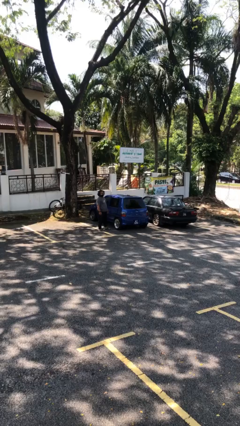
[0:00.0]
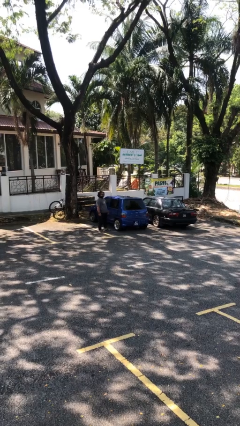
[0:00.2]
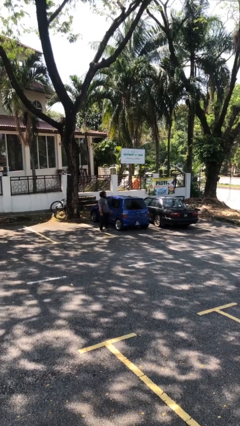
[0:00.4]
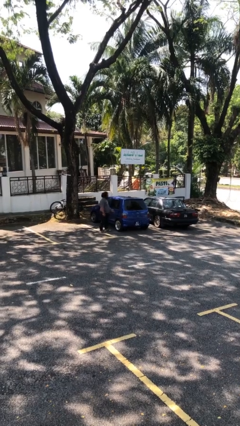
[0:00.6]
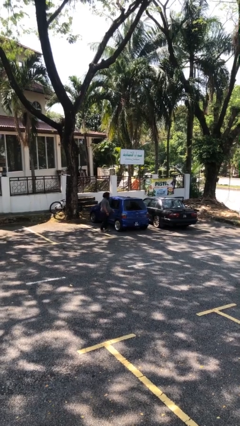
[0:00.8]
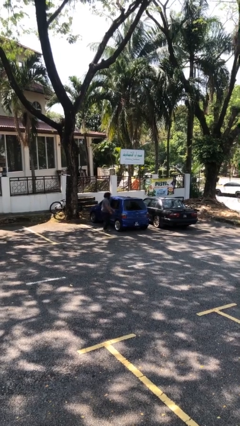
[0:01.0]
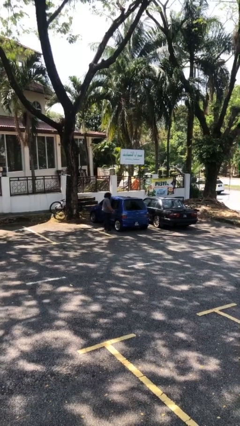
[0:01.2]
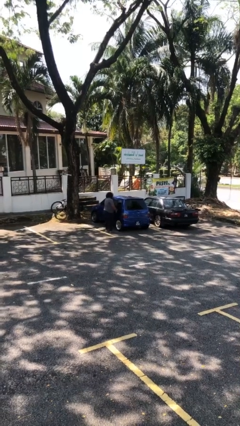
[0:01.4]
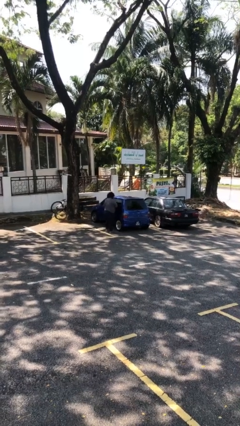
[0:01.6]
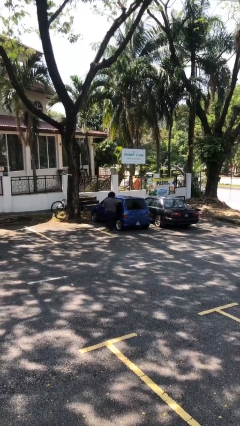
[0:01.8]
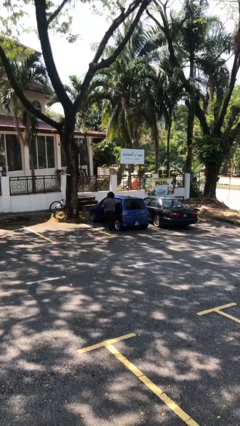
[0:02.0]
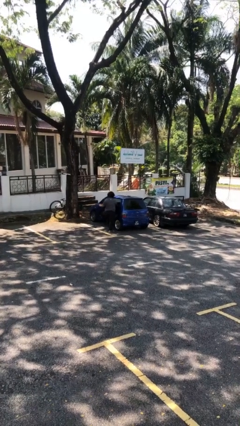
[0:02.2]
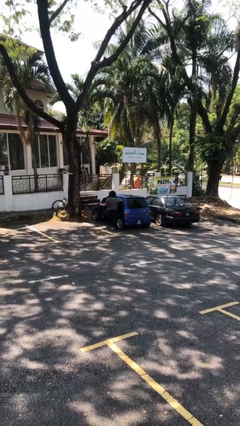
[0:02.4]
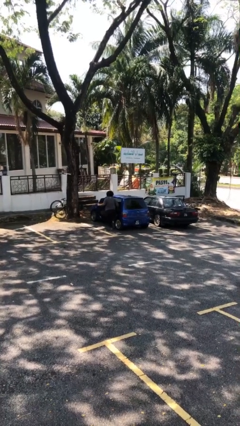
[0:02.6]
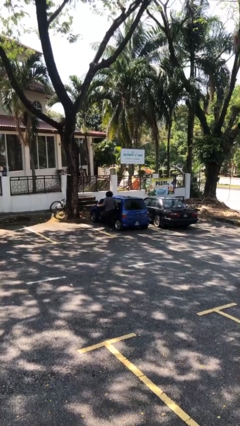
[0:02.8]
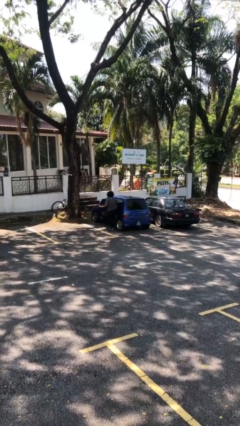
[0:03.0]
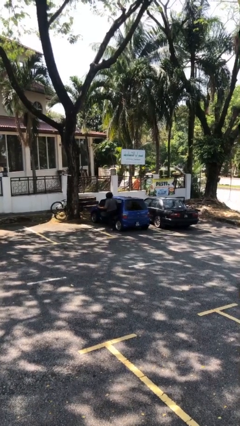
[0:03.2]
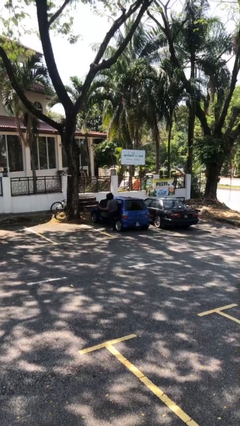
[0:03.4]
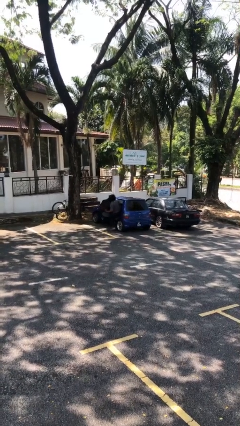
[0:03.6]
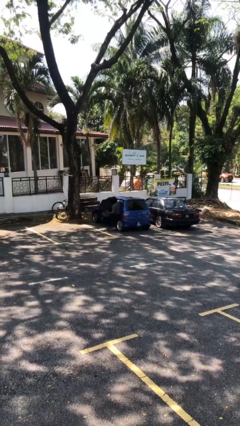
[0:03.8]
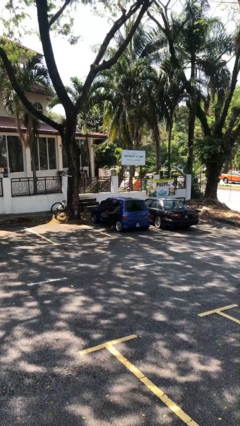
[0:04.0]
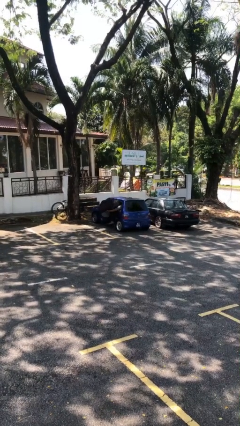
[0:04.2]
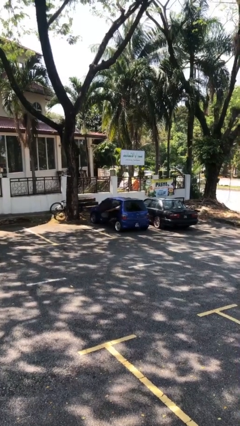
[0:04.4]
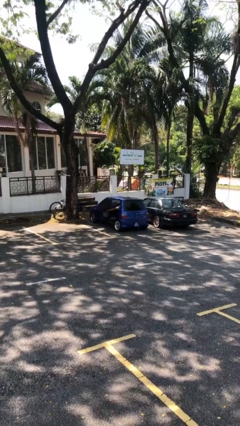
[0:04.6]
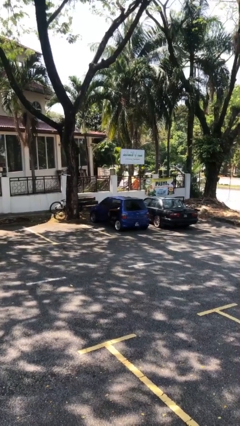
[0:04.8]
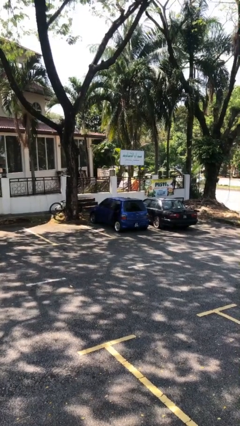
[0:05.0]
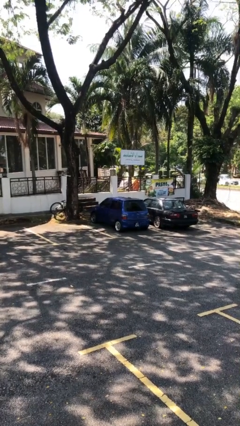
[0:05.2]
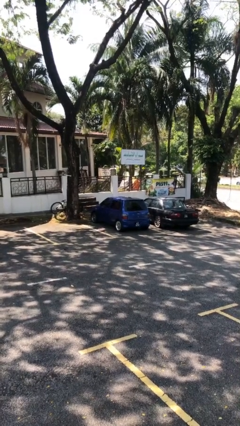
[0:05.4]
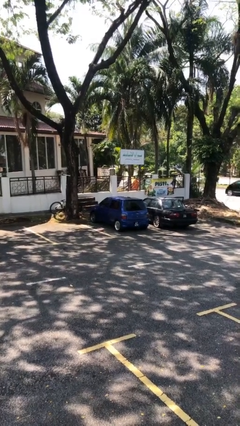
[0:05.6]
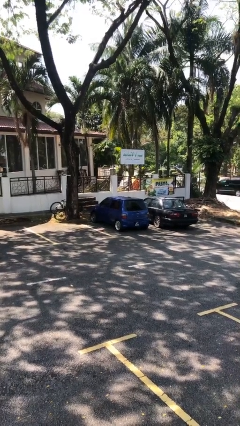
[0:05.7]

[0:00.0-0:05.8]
car picks up person

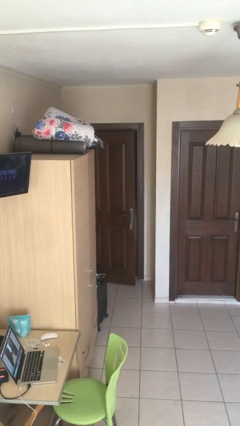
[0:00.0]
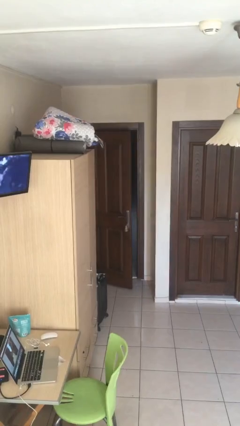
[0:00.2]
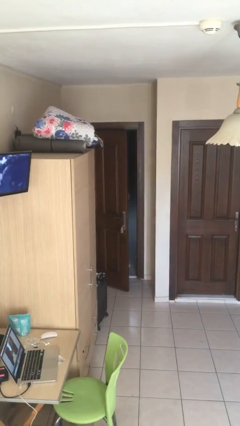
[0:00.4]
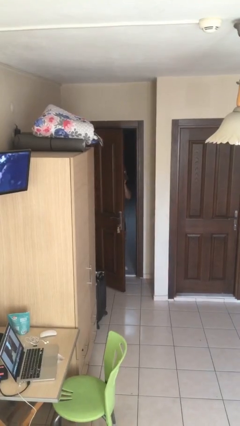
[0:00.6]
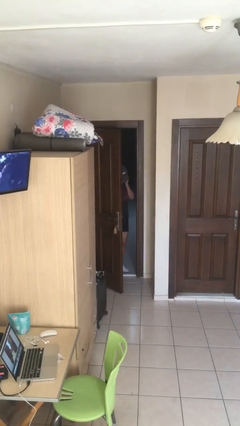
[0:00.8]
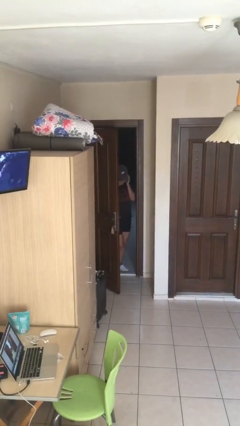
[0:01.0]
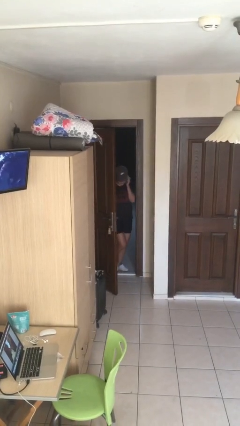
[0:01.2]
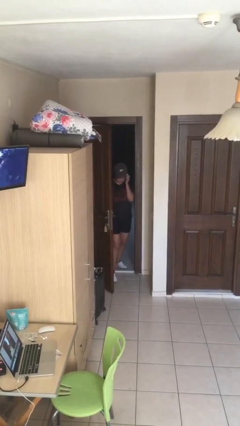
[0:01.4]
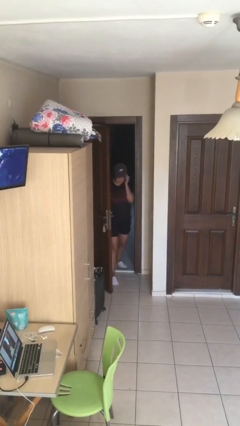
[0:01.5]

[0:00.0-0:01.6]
person opens facility door

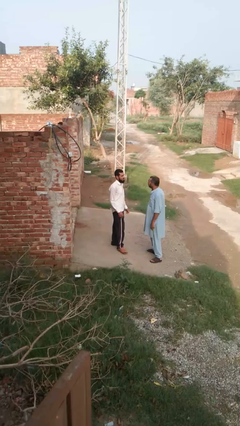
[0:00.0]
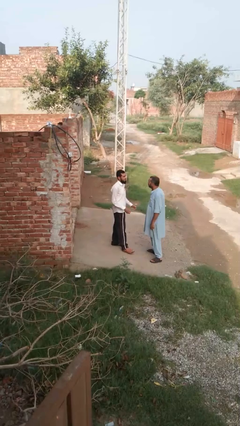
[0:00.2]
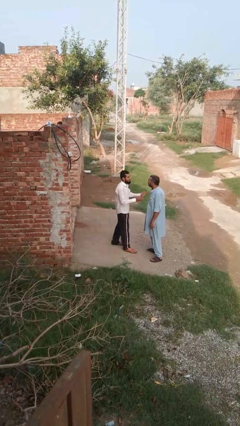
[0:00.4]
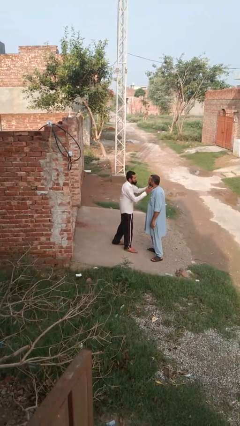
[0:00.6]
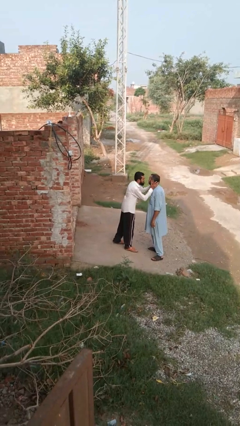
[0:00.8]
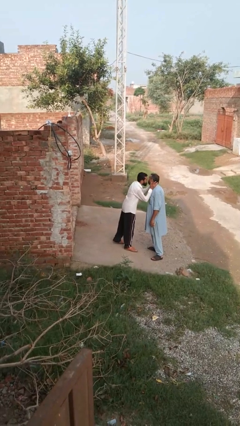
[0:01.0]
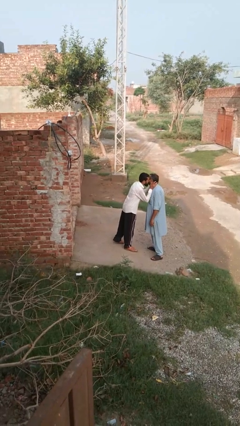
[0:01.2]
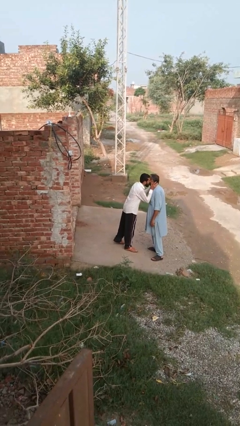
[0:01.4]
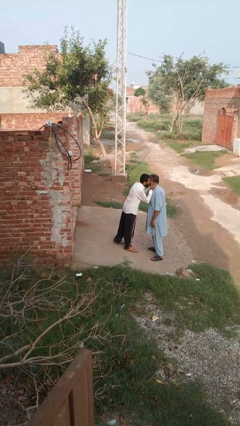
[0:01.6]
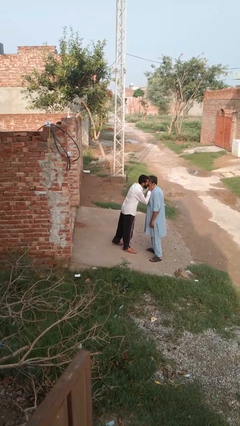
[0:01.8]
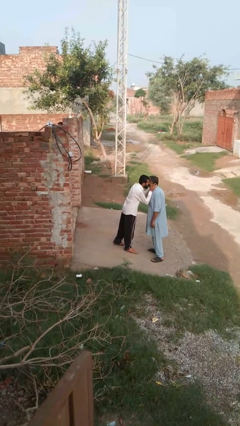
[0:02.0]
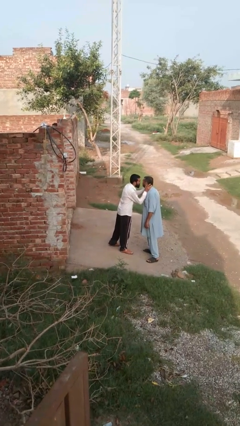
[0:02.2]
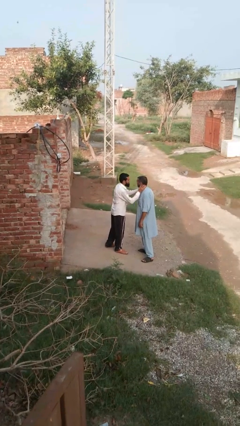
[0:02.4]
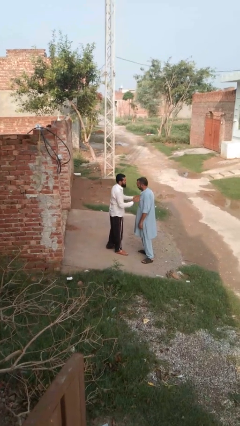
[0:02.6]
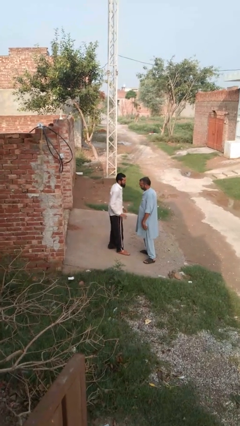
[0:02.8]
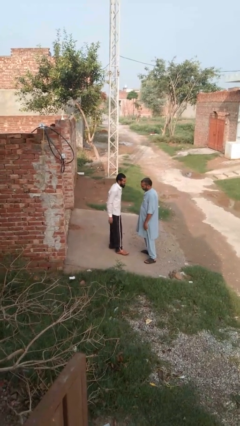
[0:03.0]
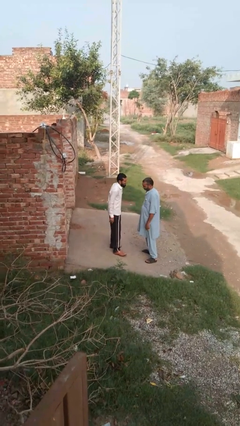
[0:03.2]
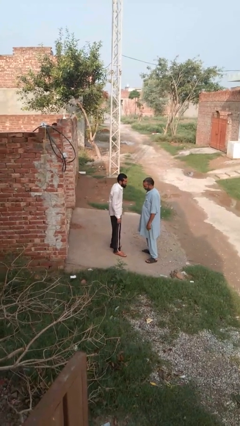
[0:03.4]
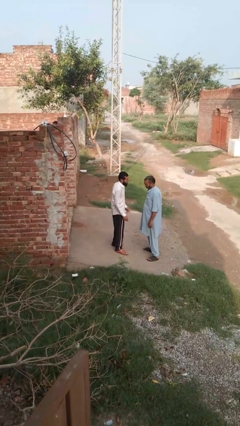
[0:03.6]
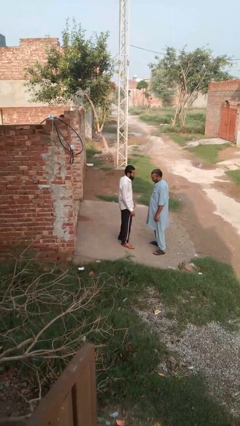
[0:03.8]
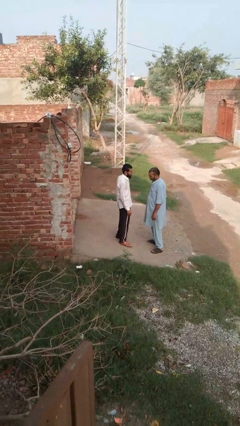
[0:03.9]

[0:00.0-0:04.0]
person kisses cheek of person

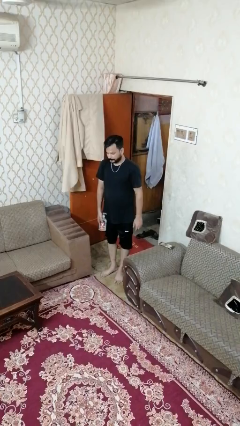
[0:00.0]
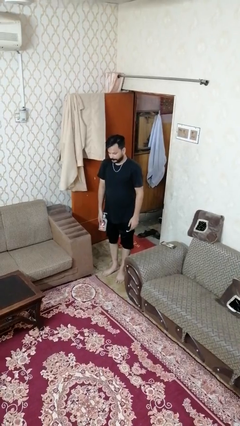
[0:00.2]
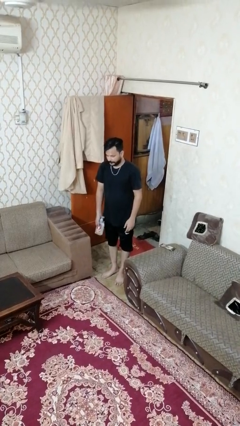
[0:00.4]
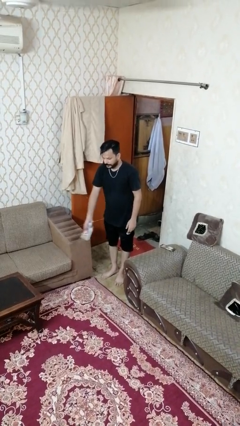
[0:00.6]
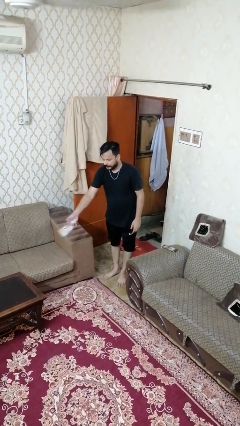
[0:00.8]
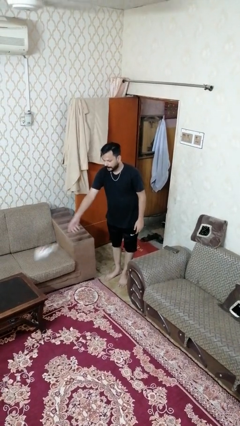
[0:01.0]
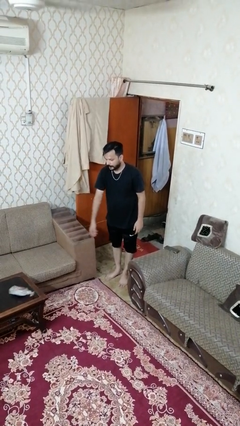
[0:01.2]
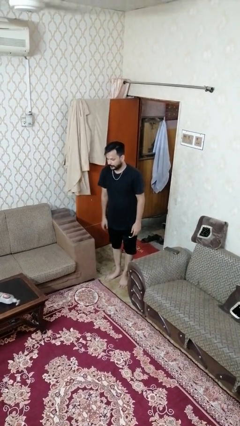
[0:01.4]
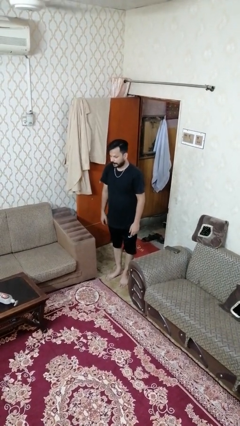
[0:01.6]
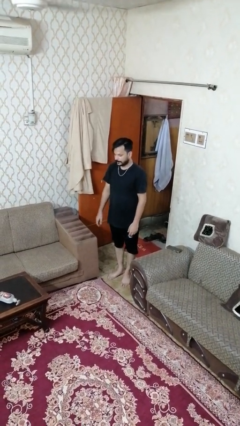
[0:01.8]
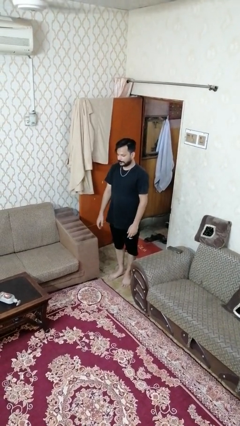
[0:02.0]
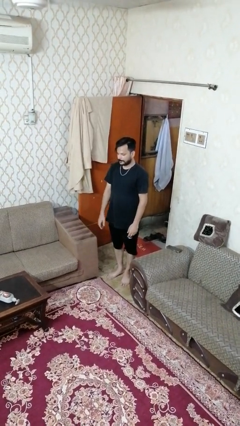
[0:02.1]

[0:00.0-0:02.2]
person throws object on table

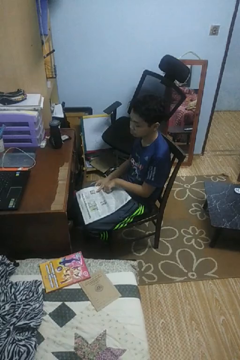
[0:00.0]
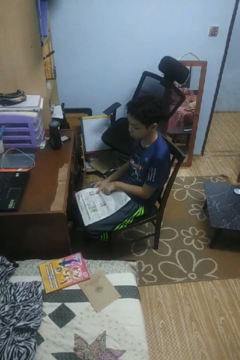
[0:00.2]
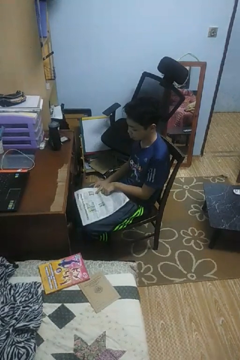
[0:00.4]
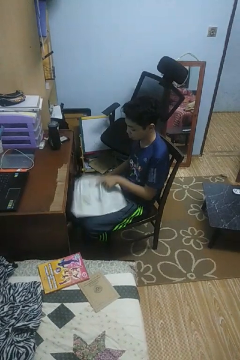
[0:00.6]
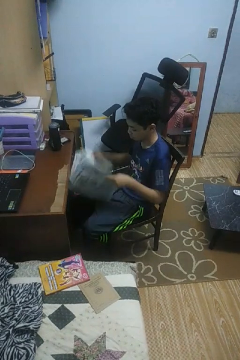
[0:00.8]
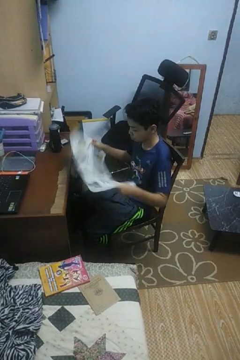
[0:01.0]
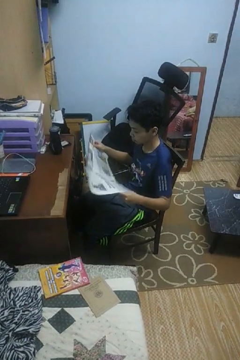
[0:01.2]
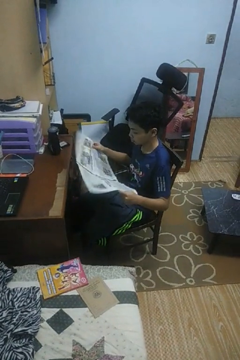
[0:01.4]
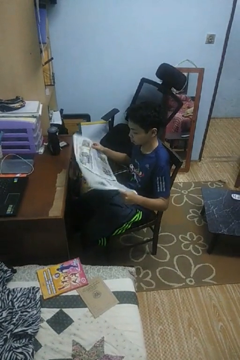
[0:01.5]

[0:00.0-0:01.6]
person reads newspaper

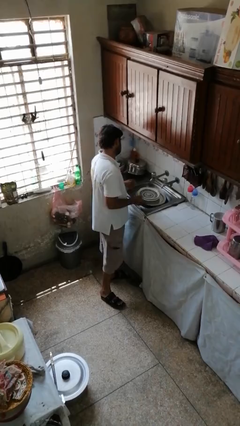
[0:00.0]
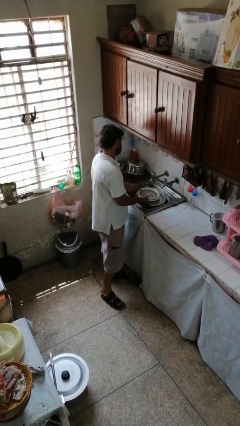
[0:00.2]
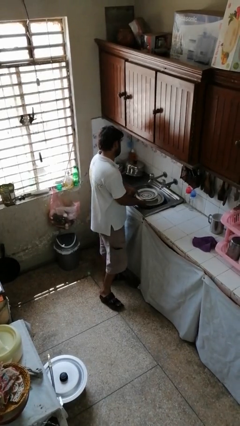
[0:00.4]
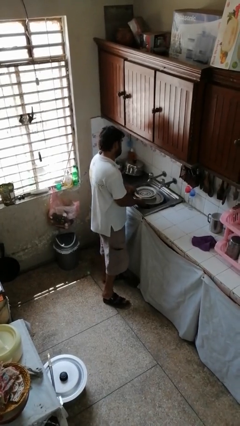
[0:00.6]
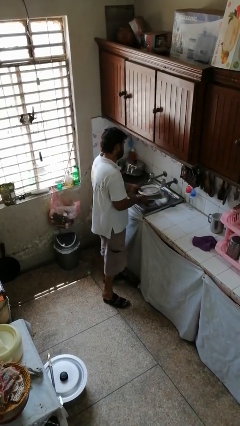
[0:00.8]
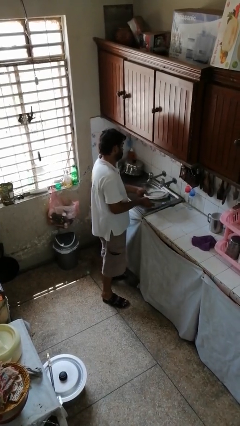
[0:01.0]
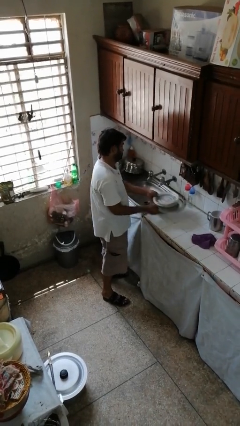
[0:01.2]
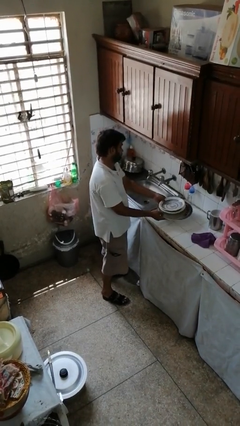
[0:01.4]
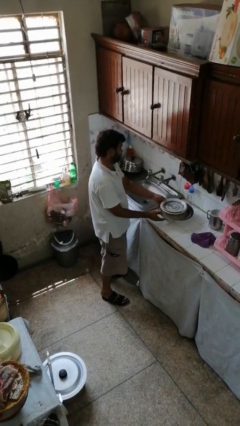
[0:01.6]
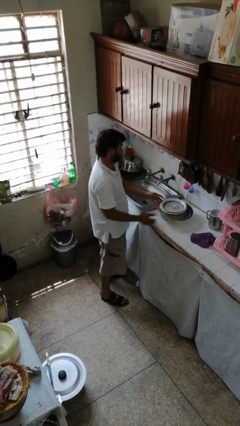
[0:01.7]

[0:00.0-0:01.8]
person unloads dishwasher

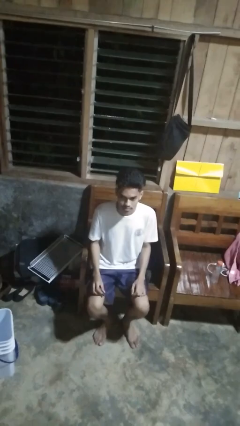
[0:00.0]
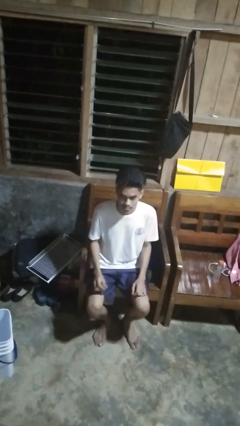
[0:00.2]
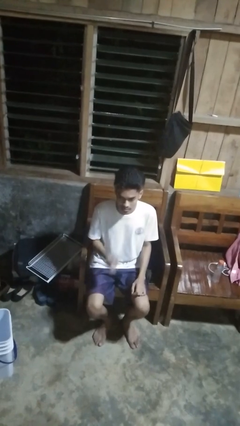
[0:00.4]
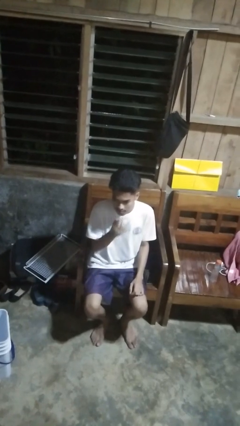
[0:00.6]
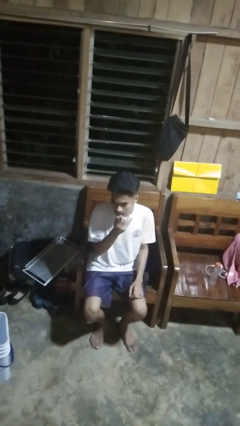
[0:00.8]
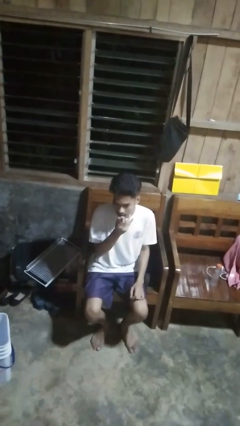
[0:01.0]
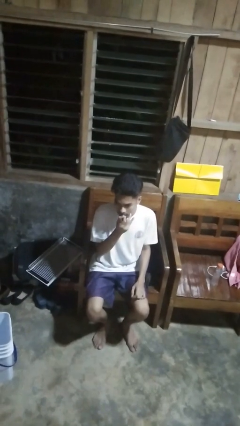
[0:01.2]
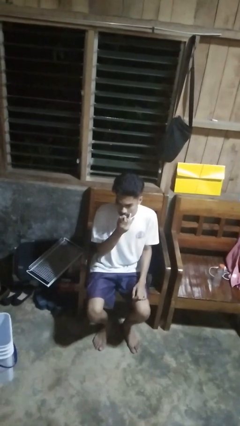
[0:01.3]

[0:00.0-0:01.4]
person applies lip makeup
